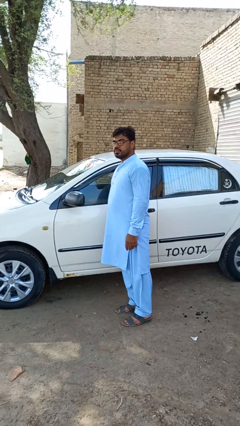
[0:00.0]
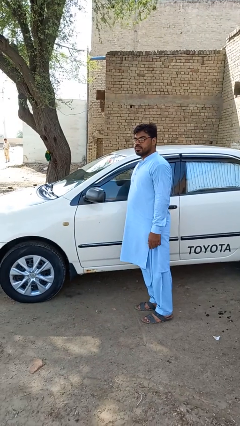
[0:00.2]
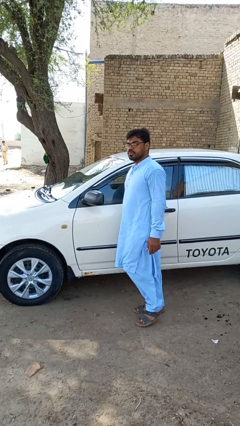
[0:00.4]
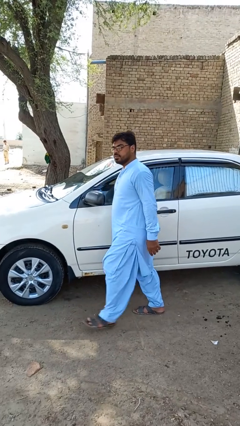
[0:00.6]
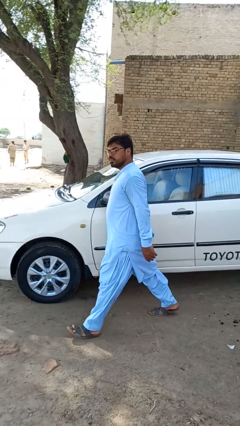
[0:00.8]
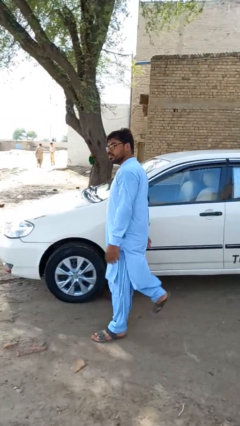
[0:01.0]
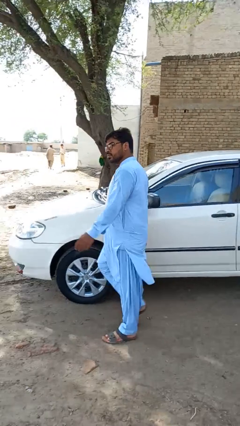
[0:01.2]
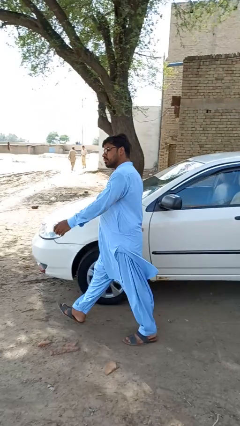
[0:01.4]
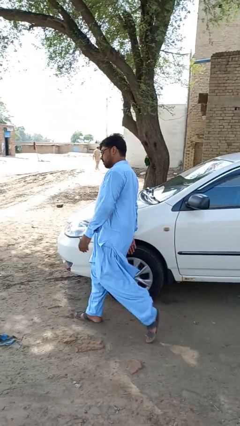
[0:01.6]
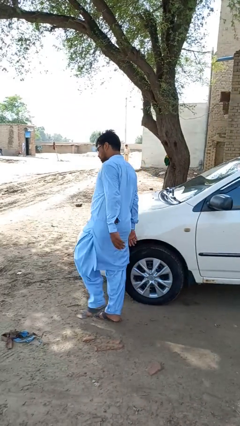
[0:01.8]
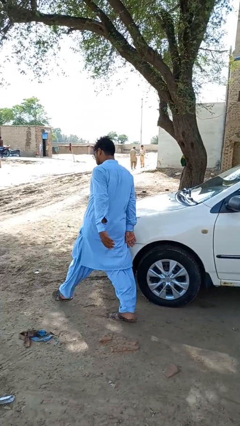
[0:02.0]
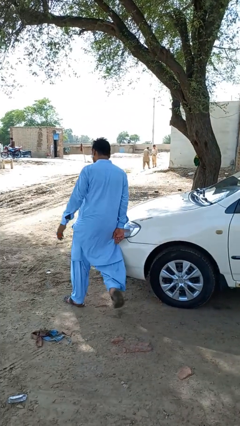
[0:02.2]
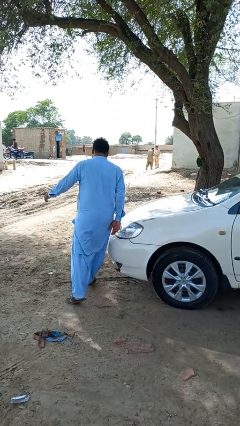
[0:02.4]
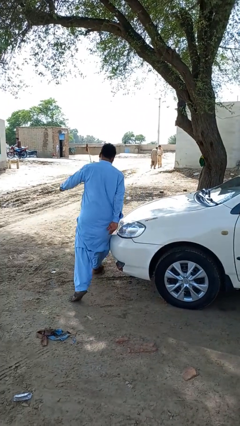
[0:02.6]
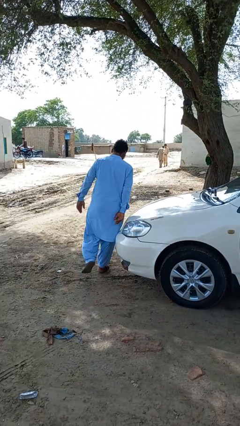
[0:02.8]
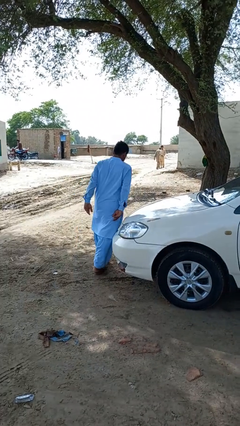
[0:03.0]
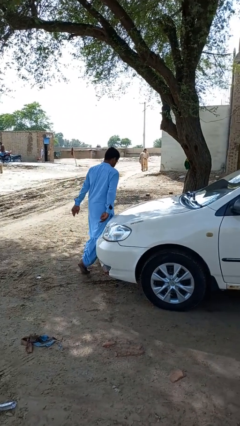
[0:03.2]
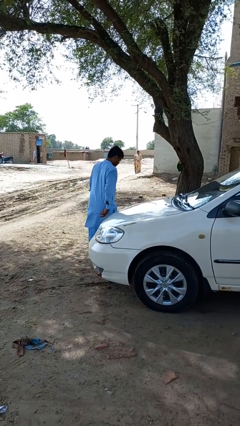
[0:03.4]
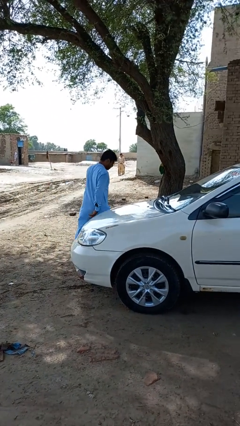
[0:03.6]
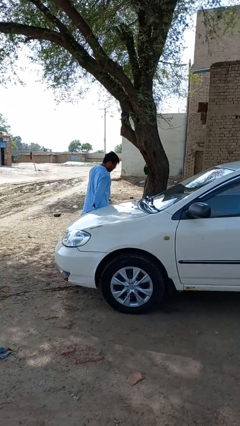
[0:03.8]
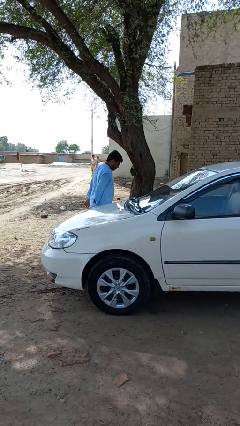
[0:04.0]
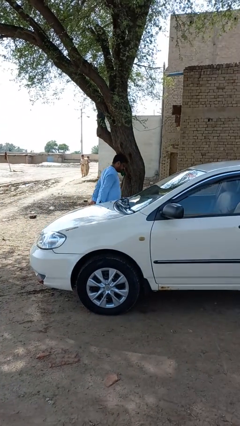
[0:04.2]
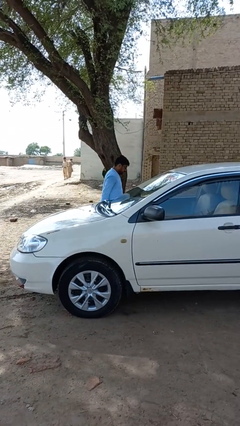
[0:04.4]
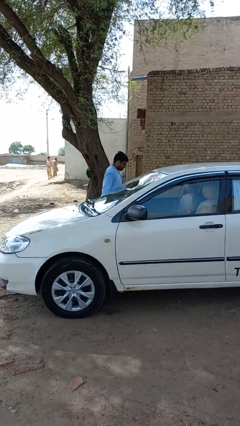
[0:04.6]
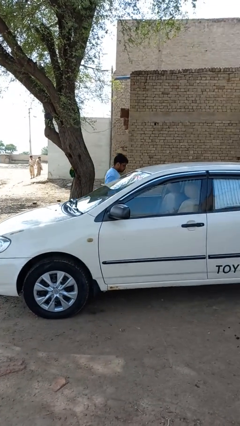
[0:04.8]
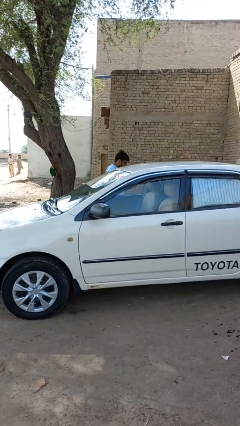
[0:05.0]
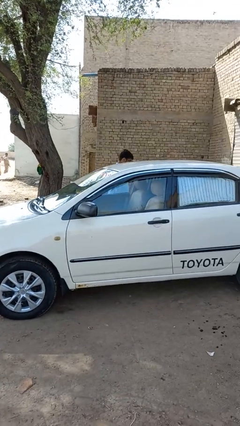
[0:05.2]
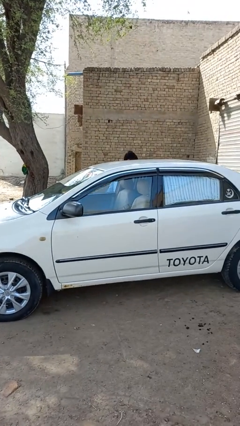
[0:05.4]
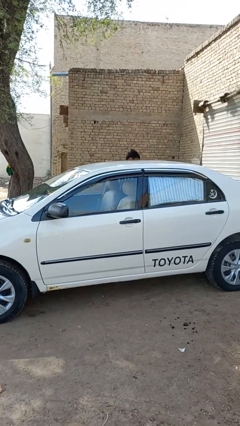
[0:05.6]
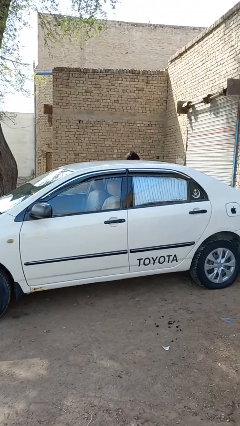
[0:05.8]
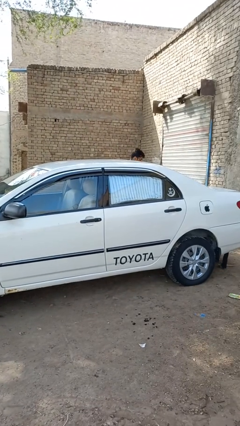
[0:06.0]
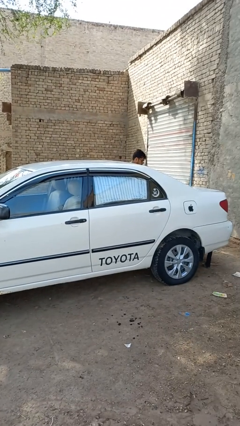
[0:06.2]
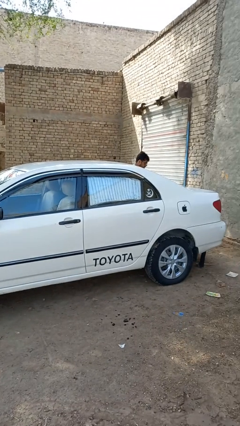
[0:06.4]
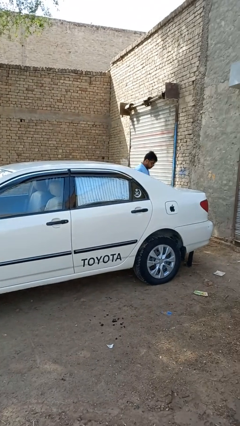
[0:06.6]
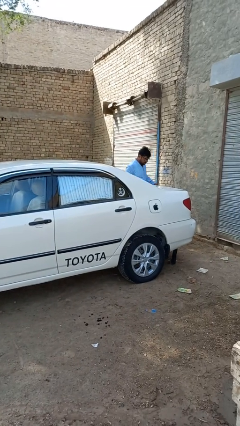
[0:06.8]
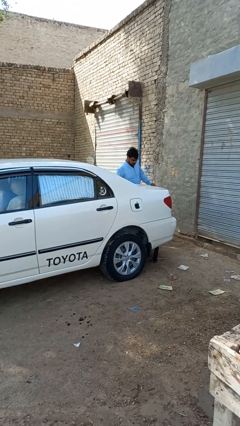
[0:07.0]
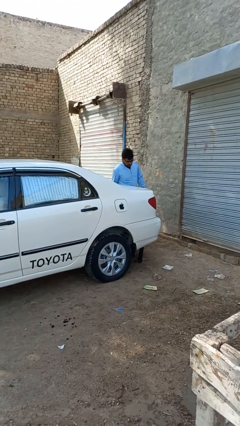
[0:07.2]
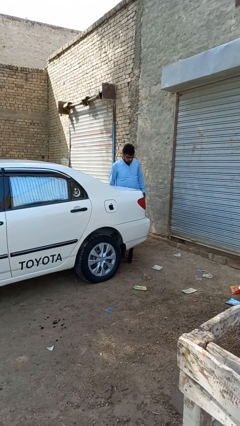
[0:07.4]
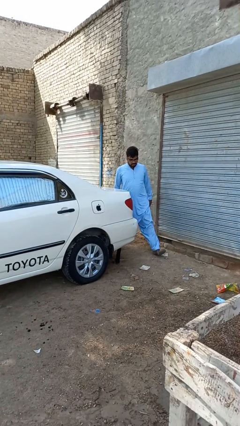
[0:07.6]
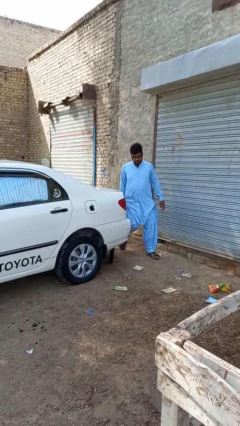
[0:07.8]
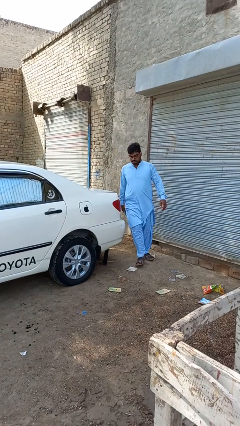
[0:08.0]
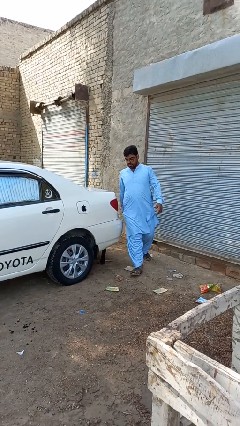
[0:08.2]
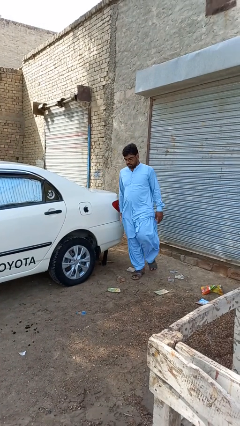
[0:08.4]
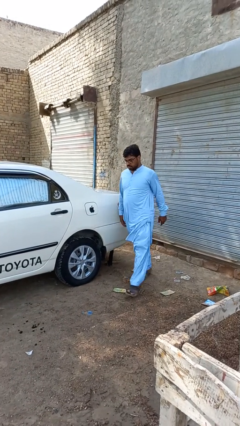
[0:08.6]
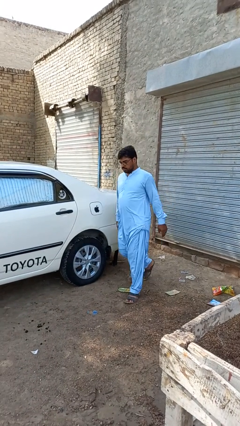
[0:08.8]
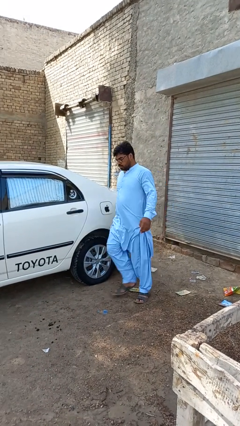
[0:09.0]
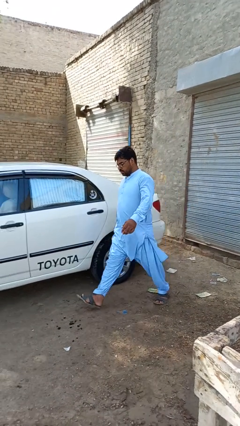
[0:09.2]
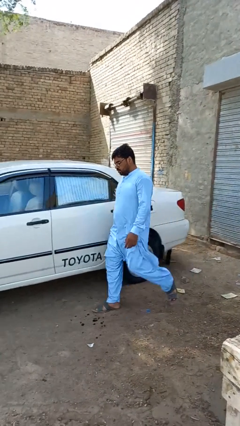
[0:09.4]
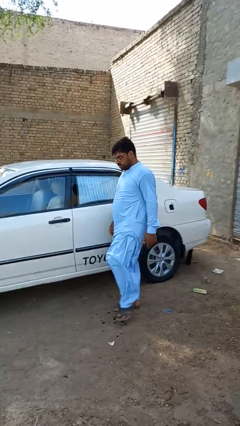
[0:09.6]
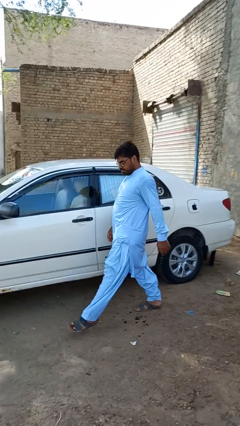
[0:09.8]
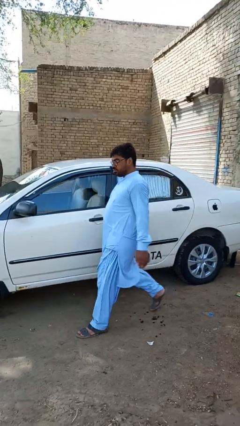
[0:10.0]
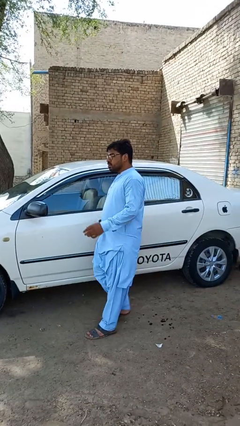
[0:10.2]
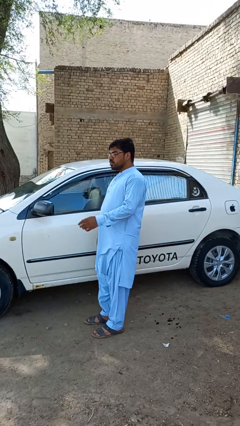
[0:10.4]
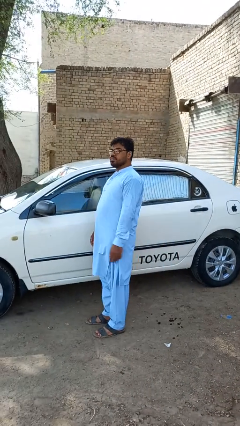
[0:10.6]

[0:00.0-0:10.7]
person walks around car

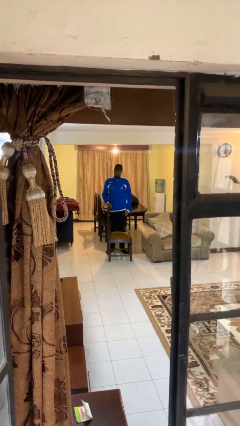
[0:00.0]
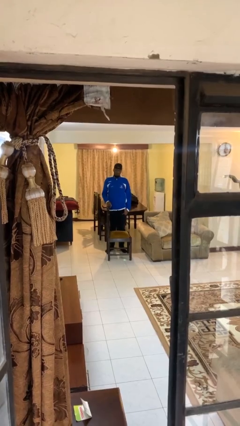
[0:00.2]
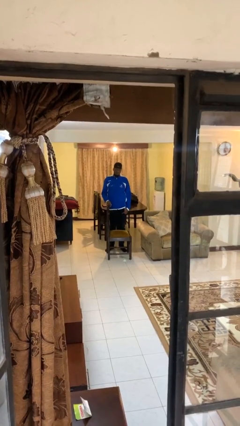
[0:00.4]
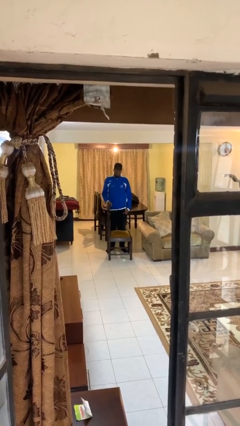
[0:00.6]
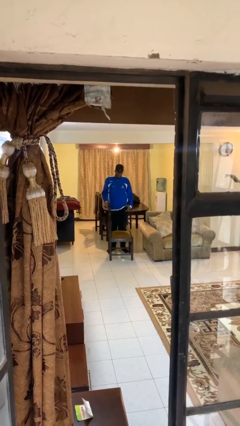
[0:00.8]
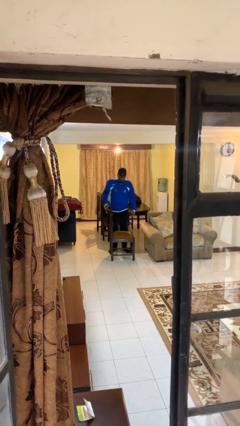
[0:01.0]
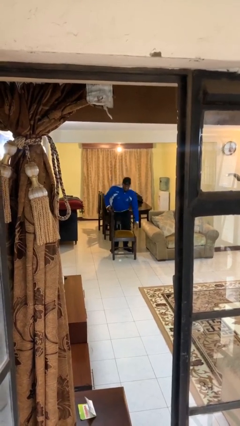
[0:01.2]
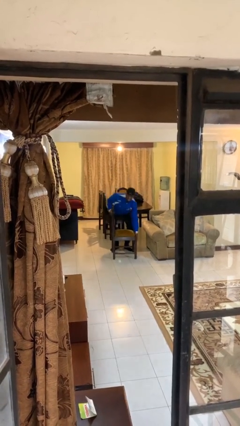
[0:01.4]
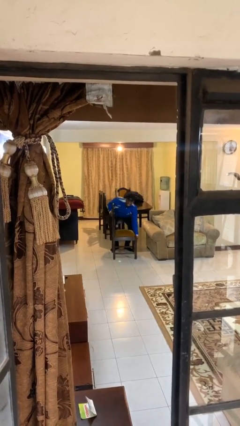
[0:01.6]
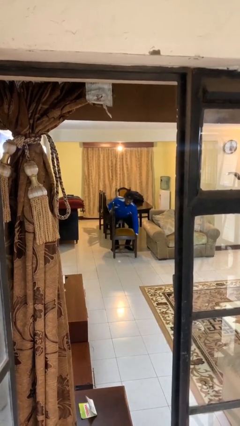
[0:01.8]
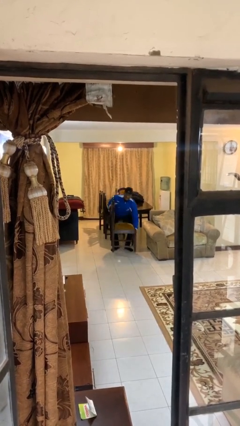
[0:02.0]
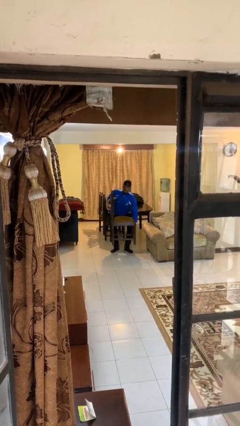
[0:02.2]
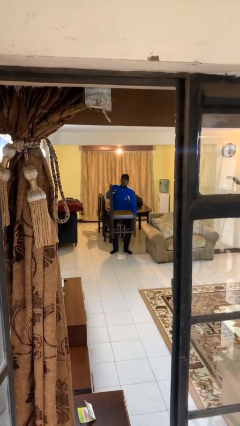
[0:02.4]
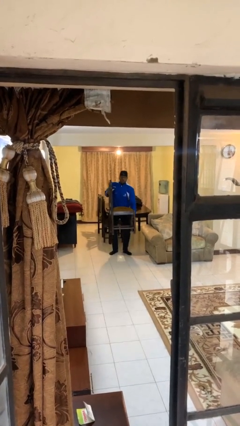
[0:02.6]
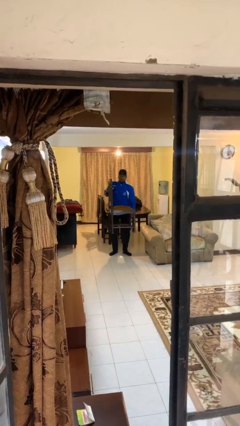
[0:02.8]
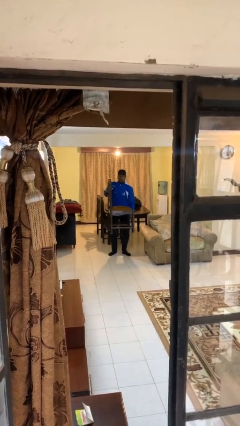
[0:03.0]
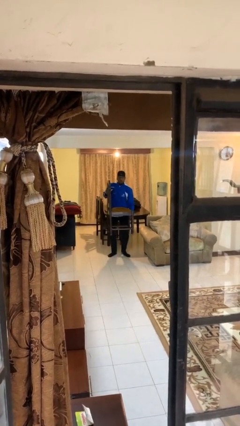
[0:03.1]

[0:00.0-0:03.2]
person picks up object from floor

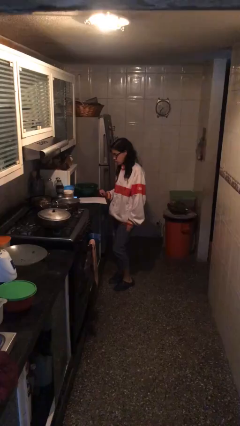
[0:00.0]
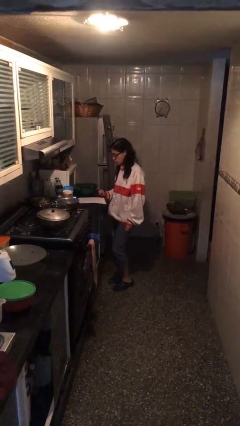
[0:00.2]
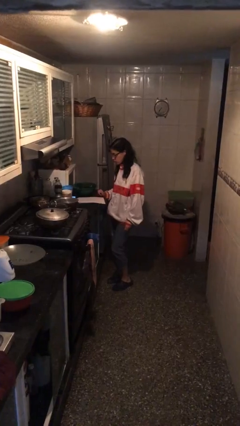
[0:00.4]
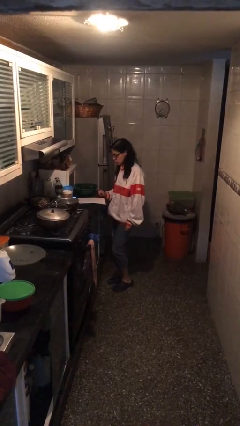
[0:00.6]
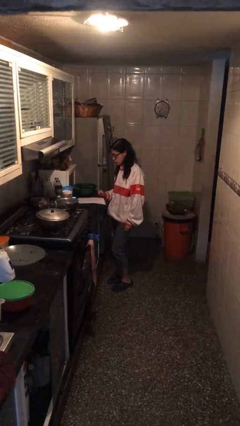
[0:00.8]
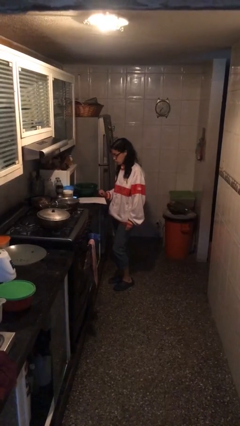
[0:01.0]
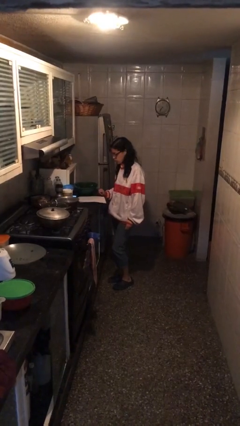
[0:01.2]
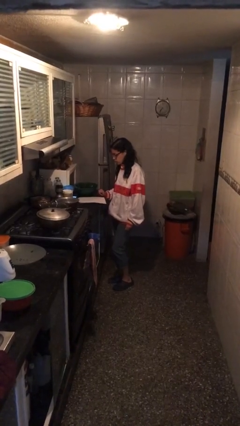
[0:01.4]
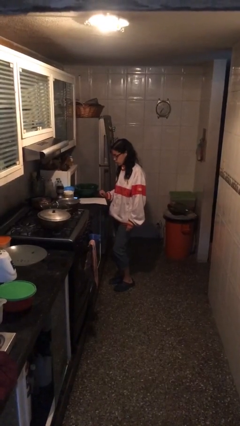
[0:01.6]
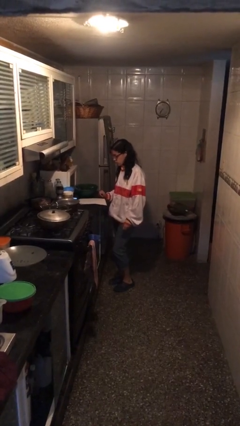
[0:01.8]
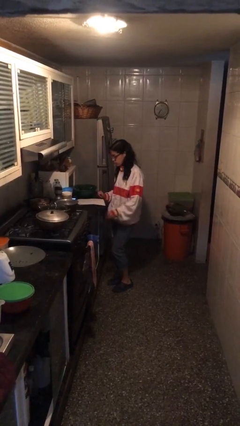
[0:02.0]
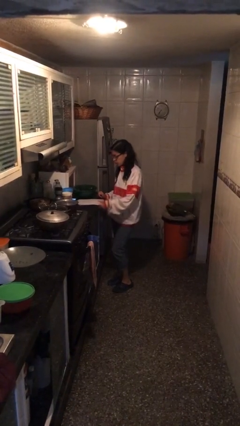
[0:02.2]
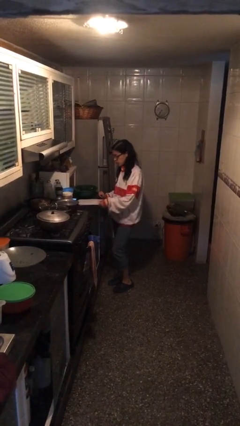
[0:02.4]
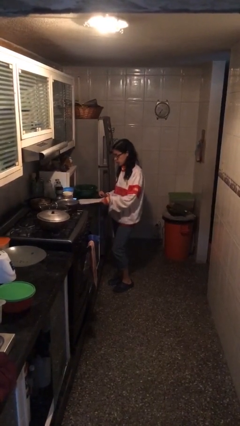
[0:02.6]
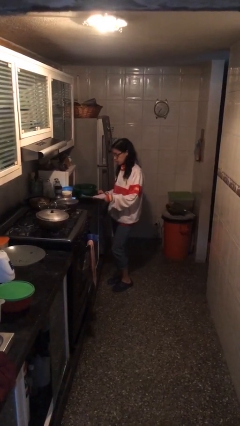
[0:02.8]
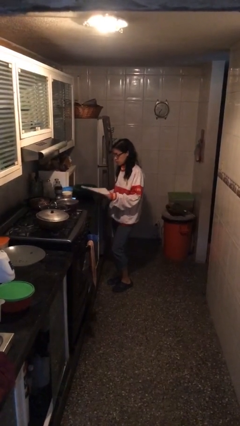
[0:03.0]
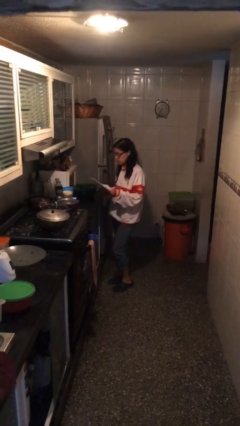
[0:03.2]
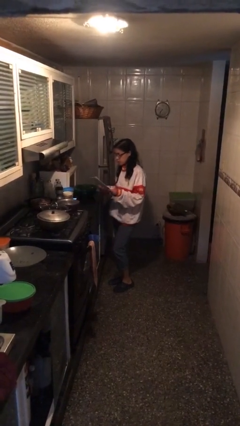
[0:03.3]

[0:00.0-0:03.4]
person picks up object from table

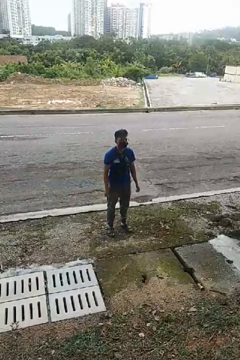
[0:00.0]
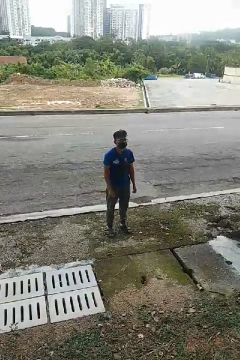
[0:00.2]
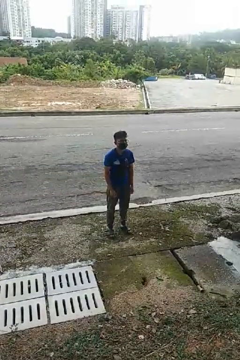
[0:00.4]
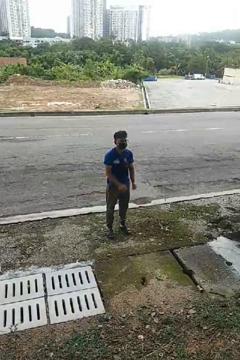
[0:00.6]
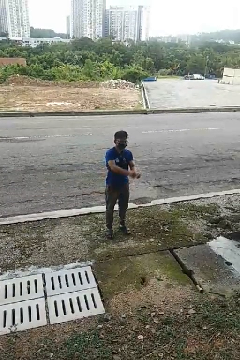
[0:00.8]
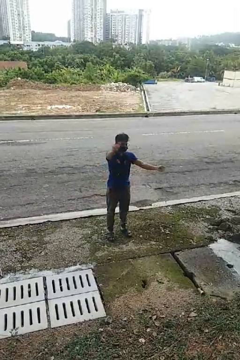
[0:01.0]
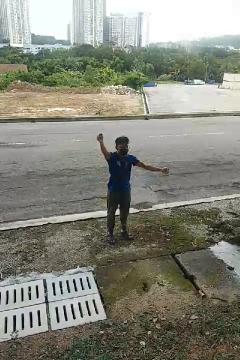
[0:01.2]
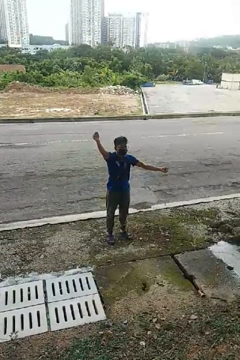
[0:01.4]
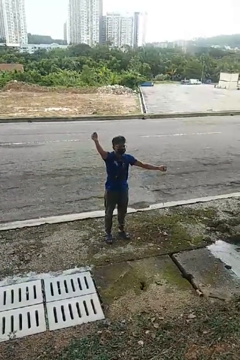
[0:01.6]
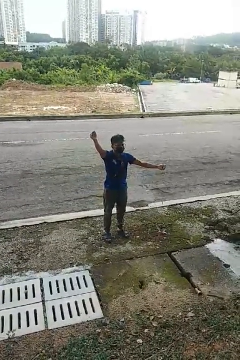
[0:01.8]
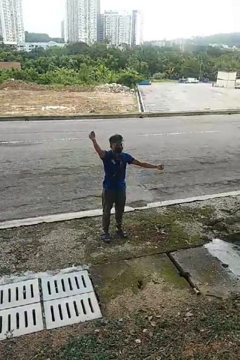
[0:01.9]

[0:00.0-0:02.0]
person gestures zoom in
